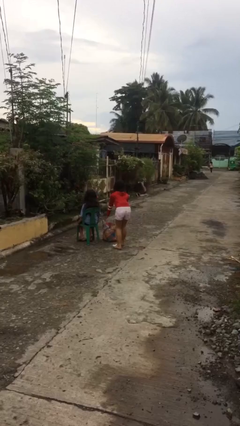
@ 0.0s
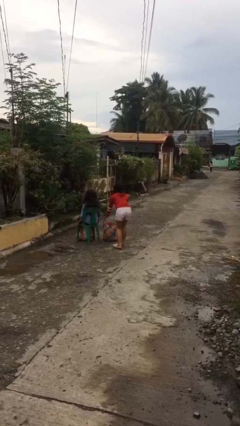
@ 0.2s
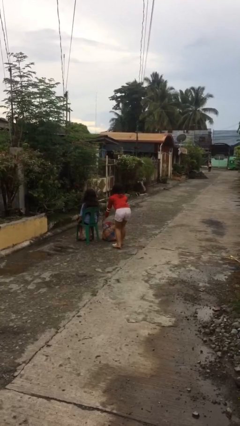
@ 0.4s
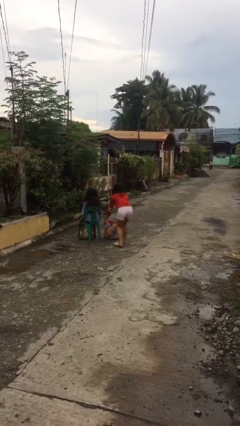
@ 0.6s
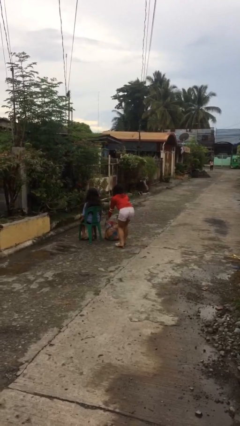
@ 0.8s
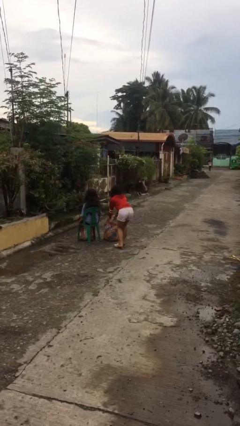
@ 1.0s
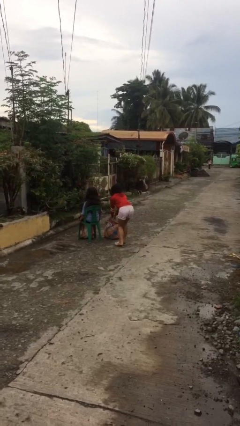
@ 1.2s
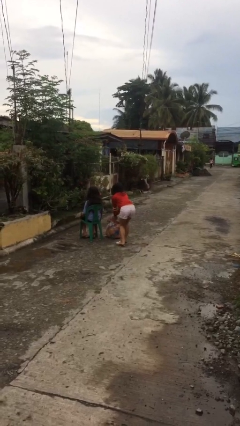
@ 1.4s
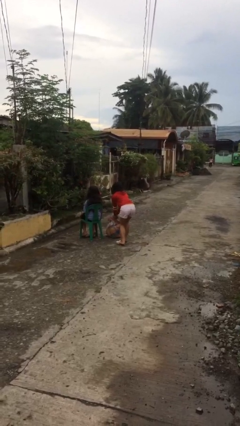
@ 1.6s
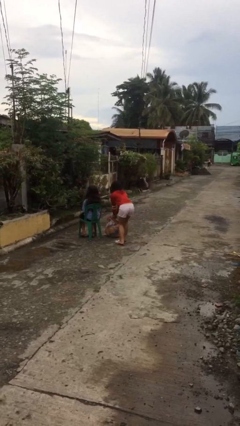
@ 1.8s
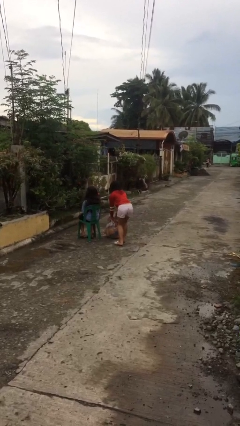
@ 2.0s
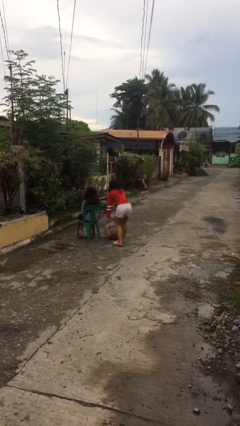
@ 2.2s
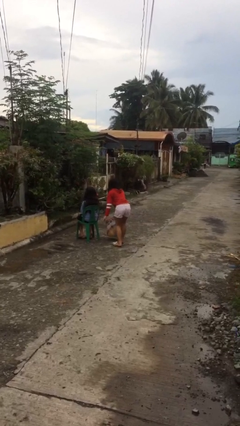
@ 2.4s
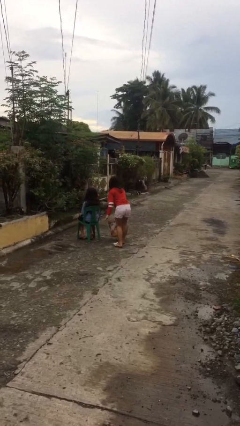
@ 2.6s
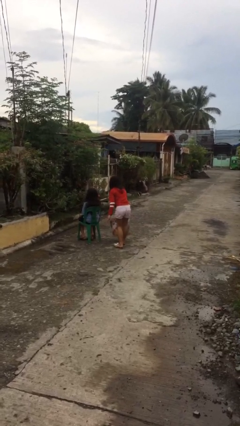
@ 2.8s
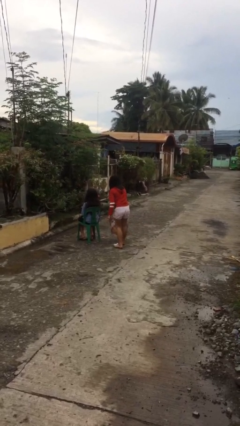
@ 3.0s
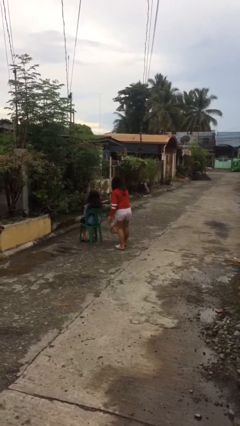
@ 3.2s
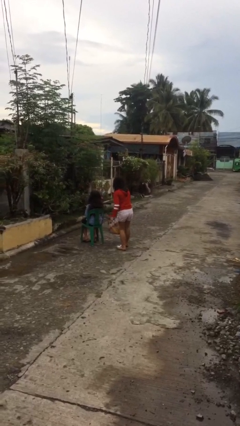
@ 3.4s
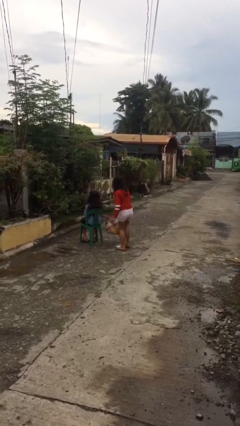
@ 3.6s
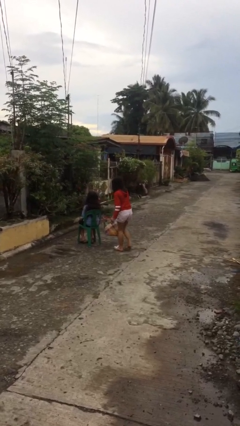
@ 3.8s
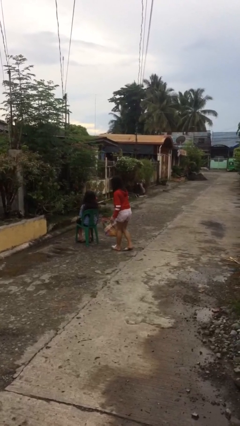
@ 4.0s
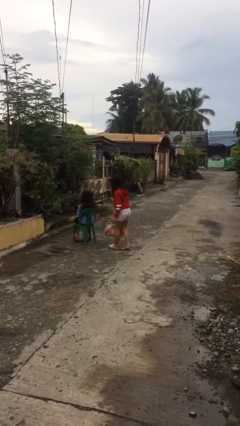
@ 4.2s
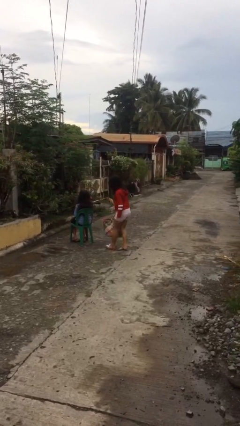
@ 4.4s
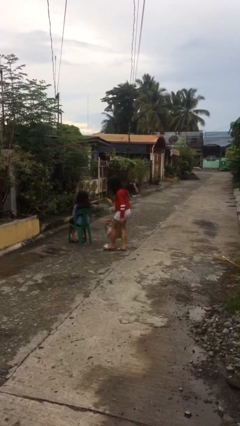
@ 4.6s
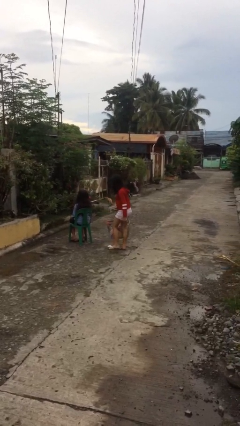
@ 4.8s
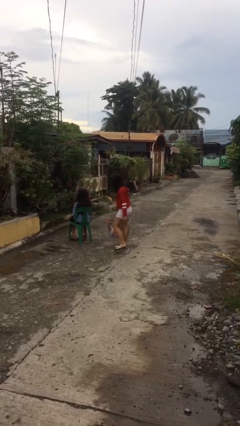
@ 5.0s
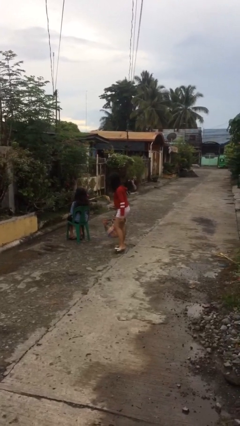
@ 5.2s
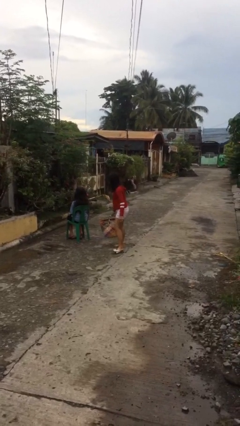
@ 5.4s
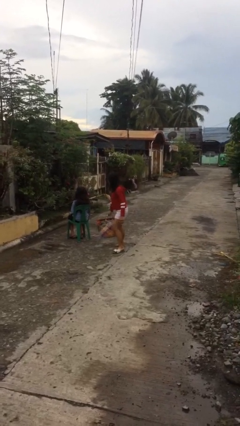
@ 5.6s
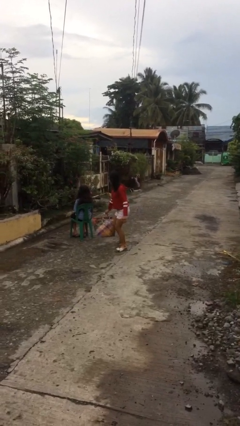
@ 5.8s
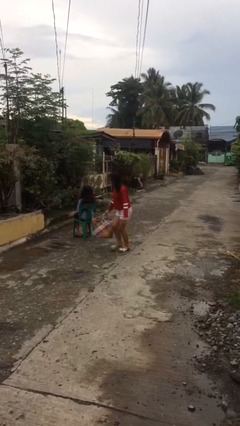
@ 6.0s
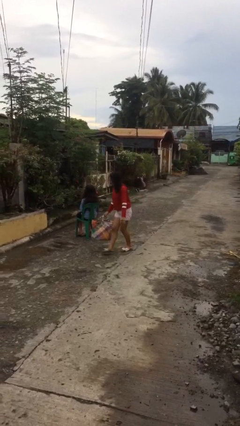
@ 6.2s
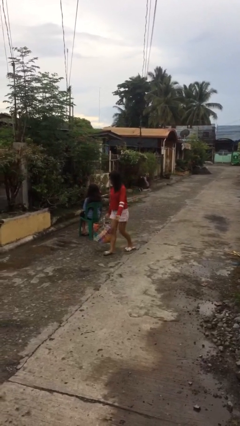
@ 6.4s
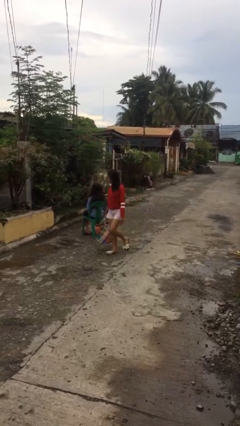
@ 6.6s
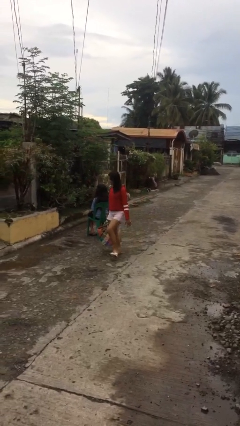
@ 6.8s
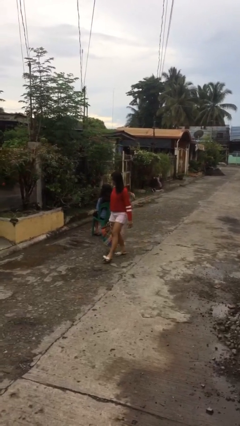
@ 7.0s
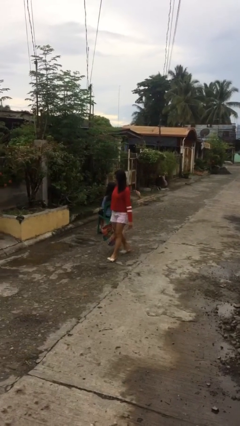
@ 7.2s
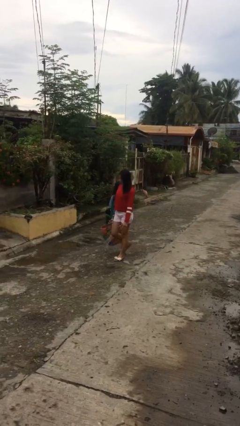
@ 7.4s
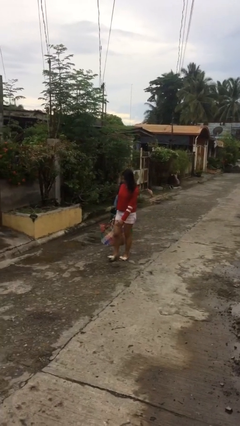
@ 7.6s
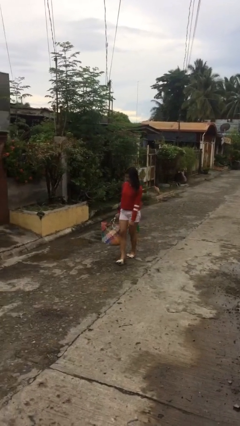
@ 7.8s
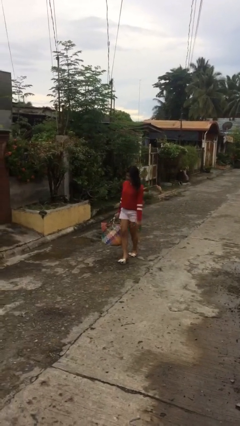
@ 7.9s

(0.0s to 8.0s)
person steals object from person

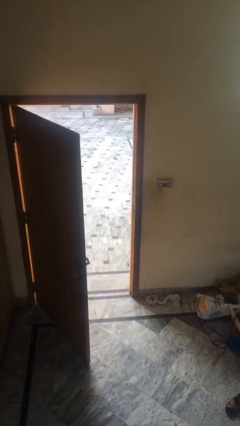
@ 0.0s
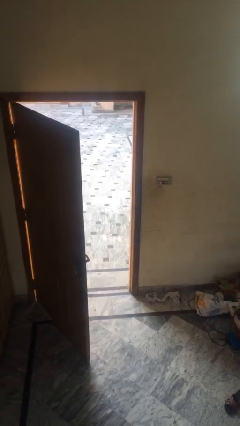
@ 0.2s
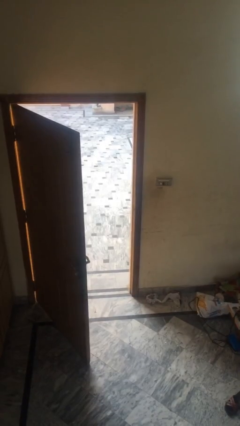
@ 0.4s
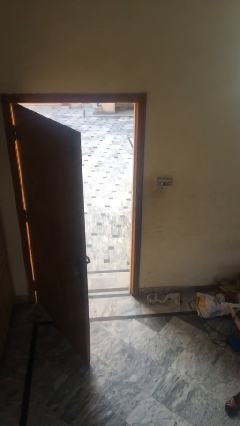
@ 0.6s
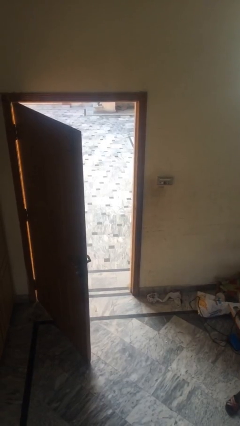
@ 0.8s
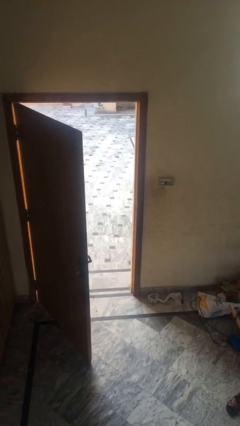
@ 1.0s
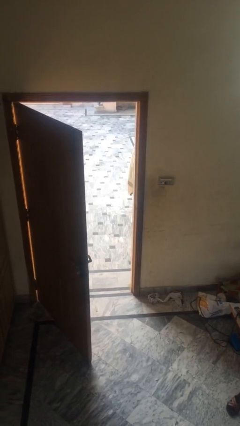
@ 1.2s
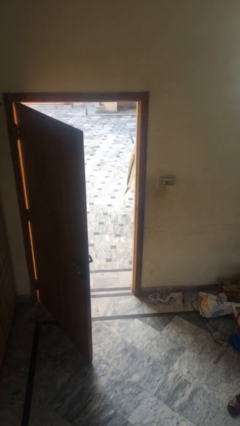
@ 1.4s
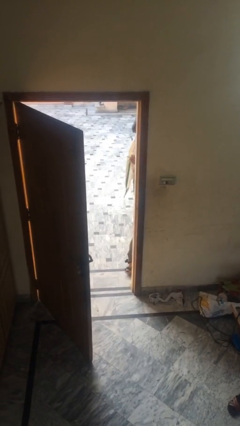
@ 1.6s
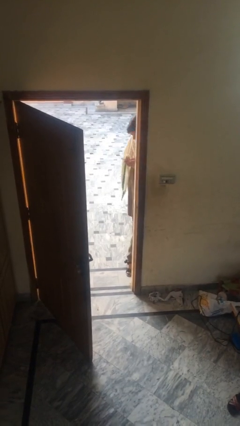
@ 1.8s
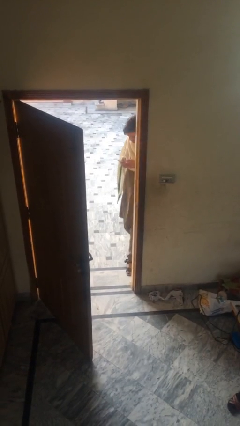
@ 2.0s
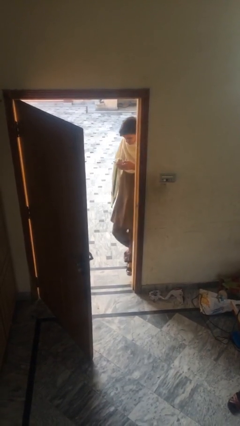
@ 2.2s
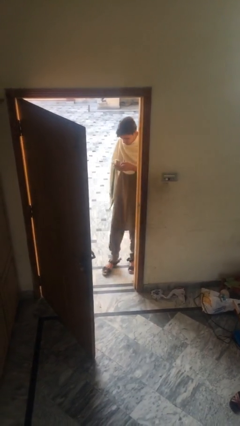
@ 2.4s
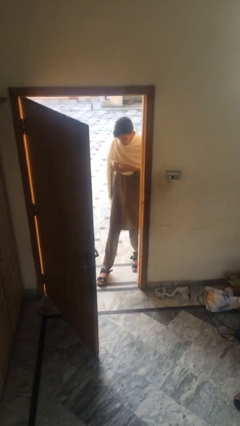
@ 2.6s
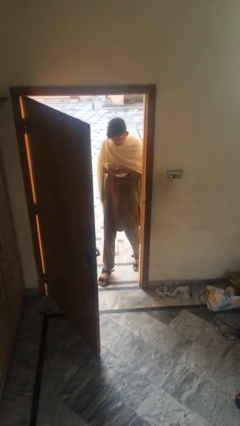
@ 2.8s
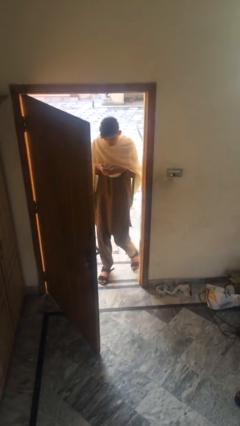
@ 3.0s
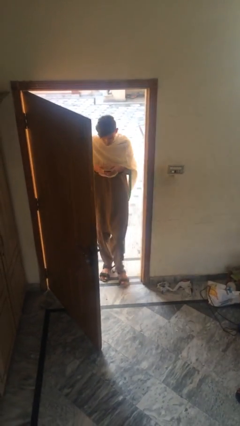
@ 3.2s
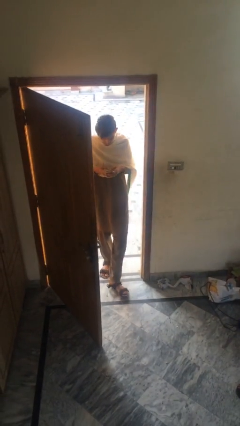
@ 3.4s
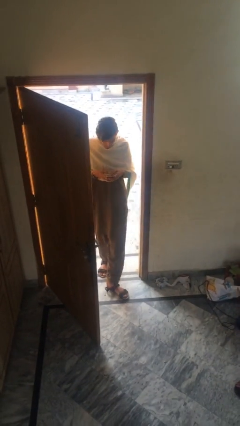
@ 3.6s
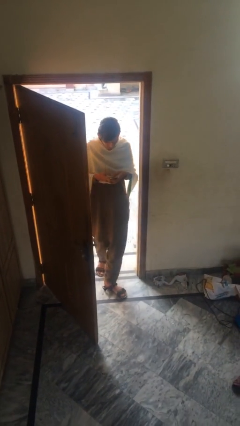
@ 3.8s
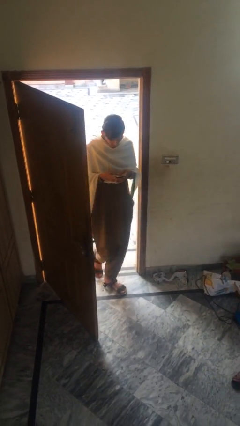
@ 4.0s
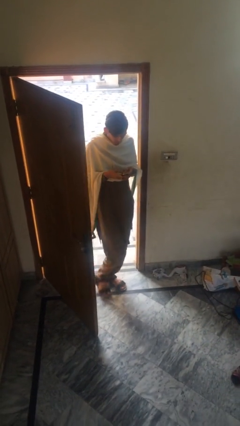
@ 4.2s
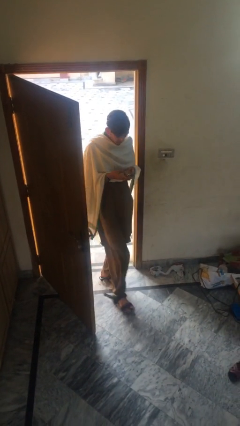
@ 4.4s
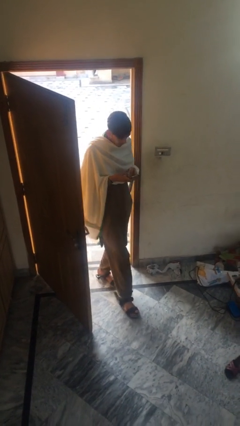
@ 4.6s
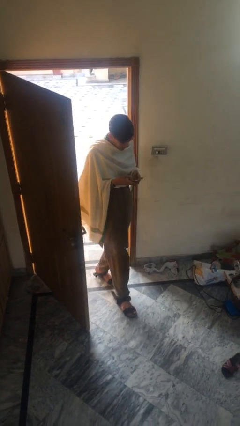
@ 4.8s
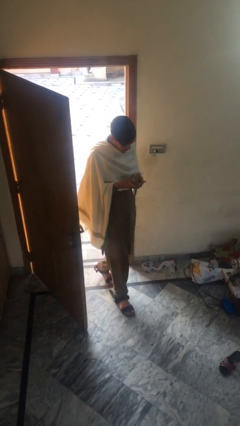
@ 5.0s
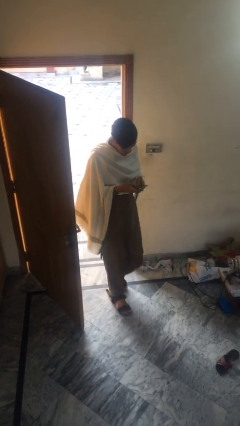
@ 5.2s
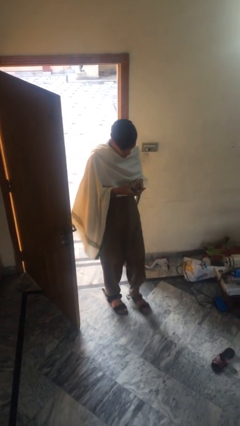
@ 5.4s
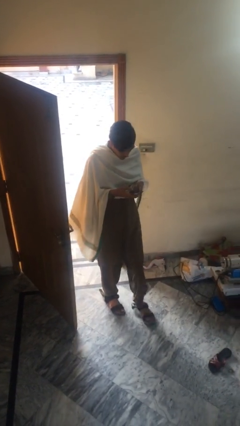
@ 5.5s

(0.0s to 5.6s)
person enters scene through structure

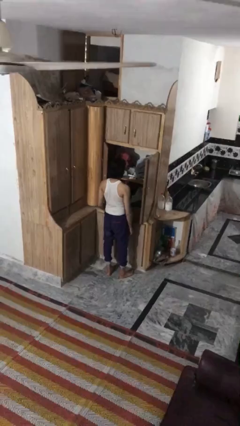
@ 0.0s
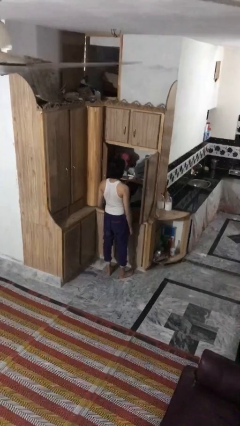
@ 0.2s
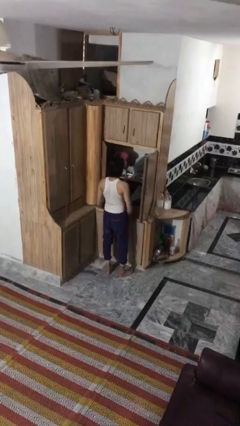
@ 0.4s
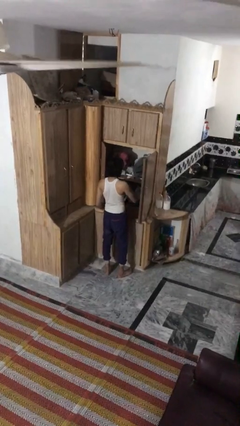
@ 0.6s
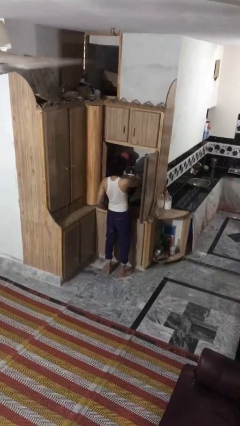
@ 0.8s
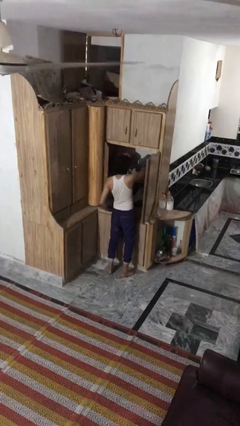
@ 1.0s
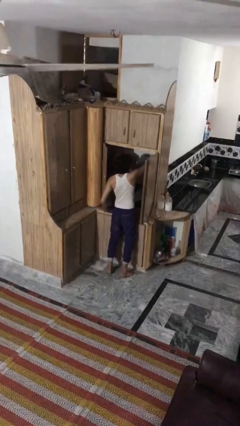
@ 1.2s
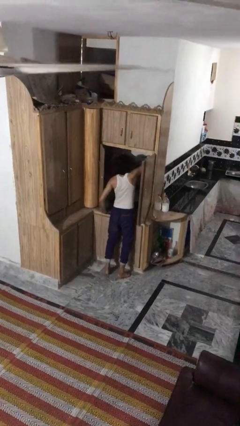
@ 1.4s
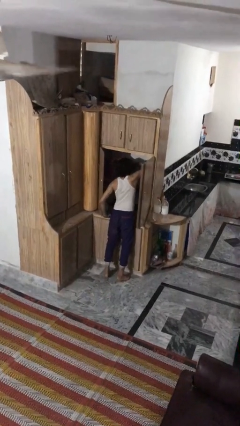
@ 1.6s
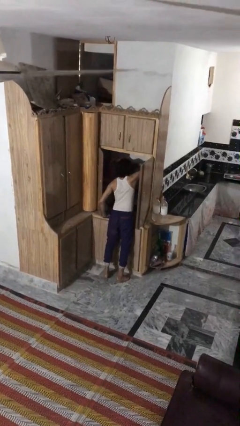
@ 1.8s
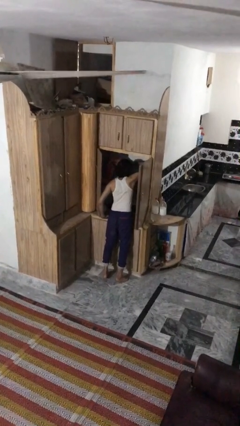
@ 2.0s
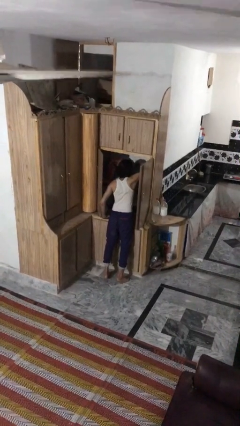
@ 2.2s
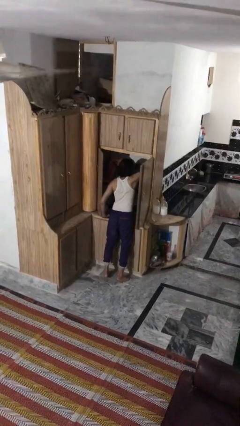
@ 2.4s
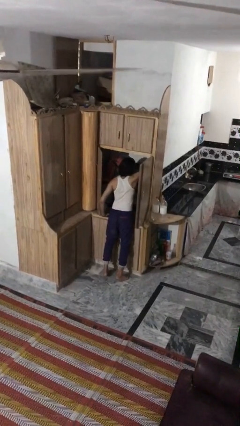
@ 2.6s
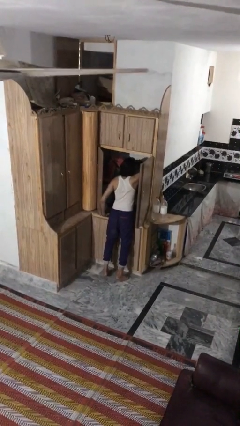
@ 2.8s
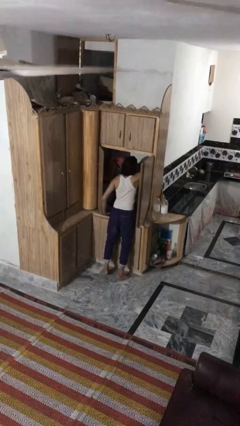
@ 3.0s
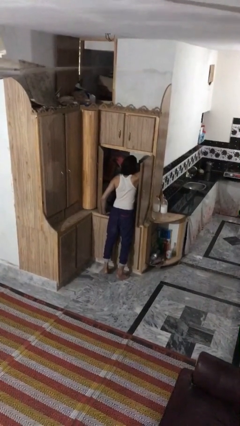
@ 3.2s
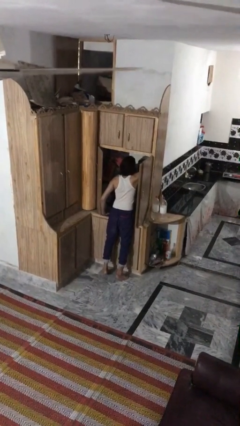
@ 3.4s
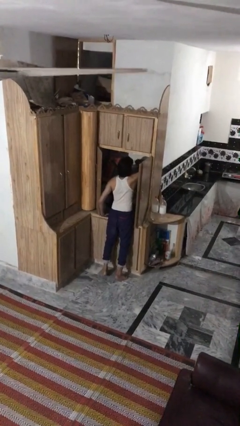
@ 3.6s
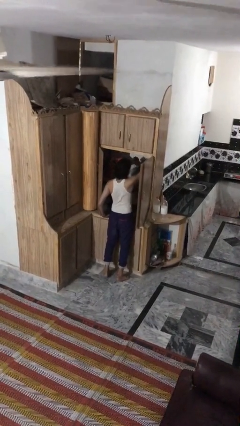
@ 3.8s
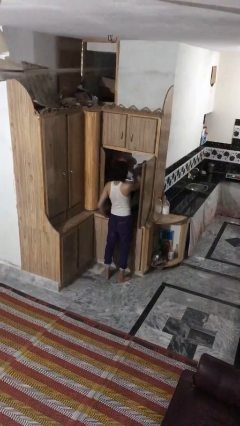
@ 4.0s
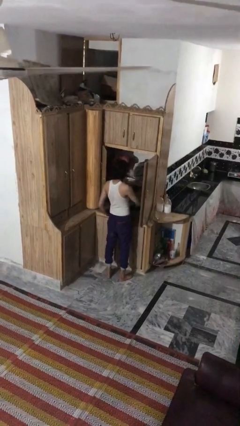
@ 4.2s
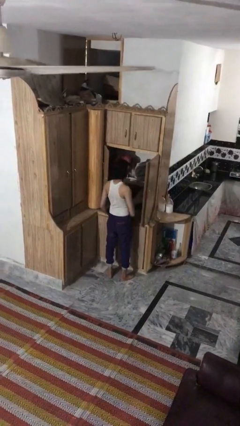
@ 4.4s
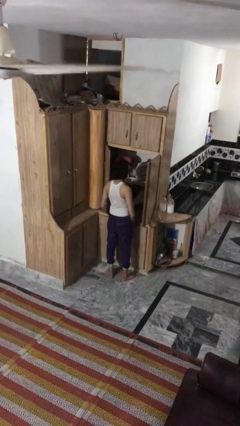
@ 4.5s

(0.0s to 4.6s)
person searches in cabinet
